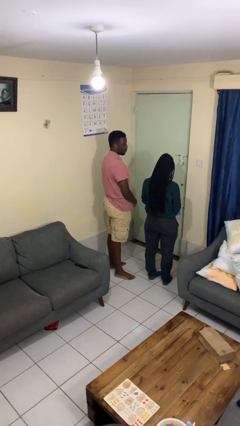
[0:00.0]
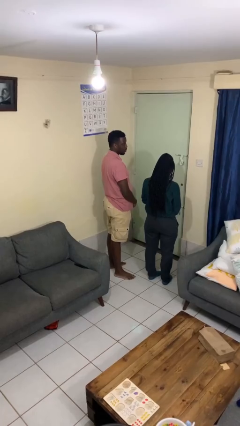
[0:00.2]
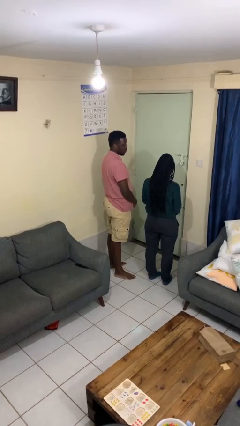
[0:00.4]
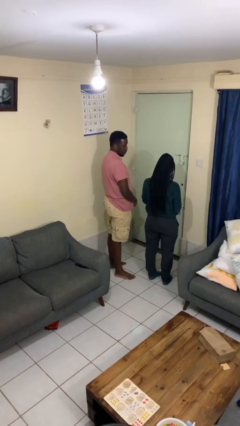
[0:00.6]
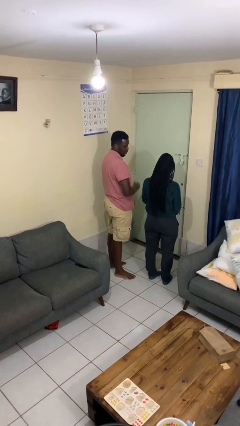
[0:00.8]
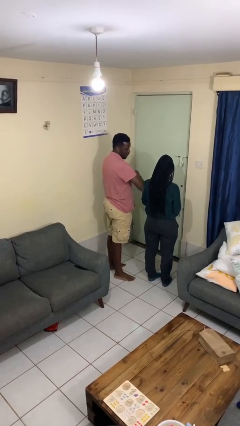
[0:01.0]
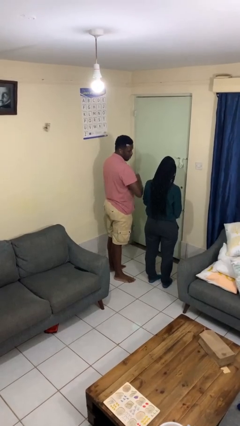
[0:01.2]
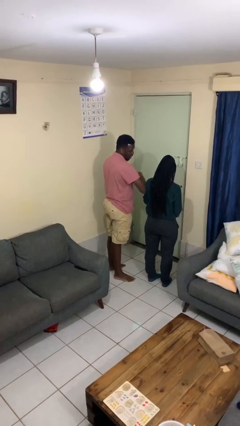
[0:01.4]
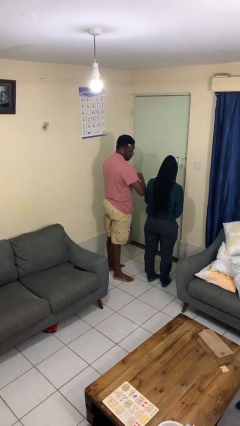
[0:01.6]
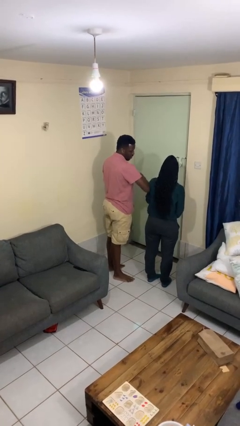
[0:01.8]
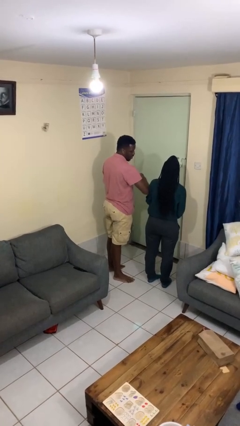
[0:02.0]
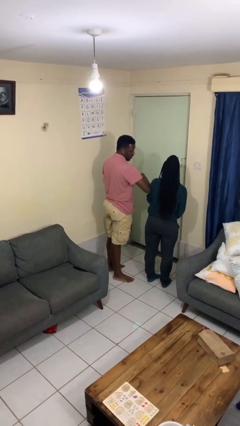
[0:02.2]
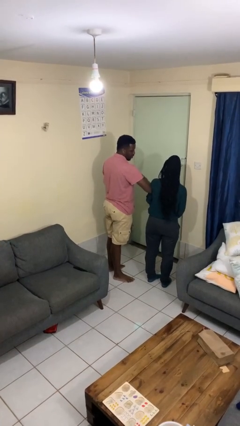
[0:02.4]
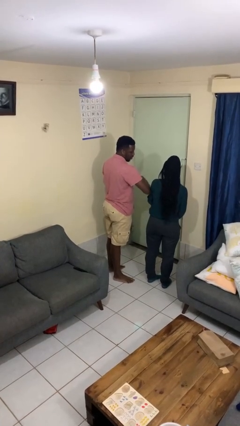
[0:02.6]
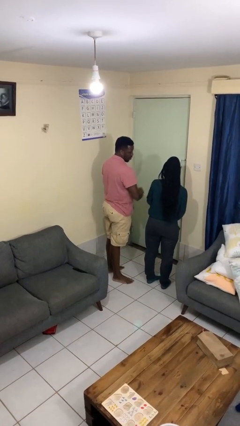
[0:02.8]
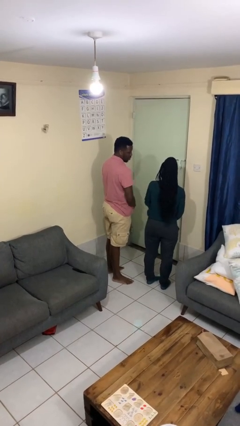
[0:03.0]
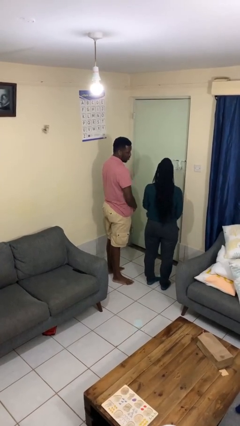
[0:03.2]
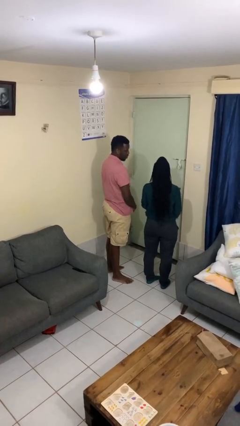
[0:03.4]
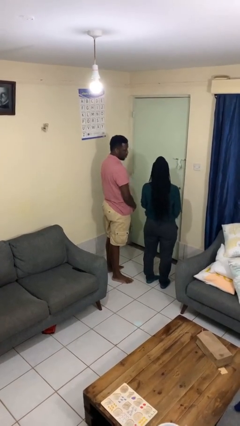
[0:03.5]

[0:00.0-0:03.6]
person nudges person with elbow

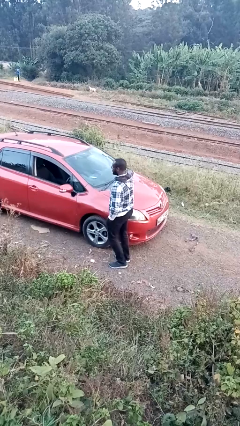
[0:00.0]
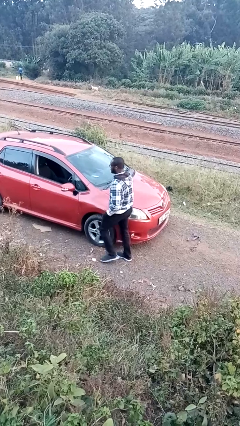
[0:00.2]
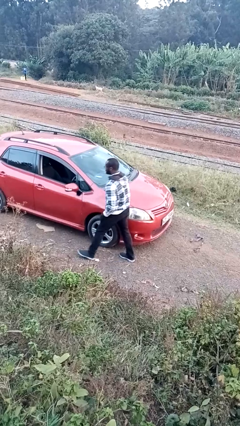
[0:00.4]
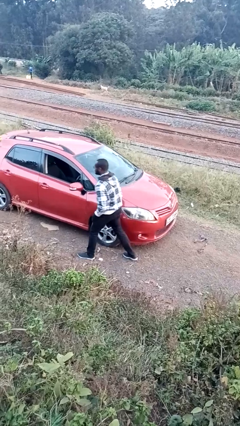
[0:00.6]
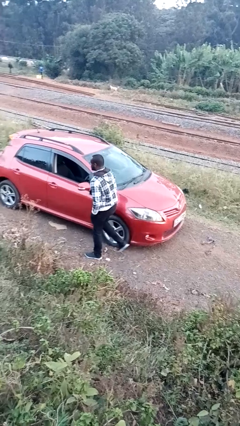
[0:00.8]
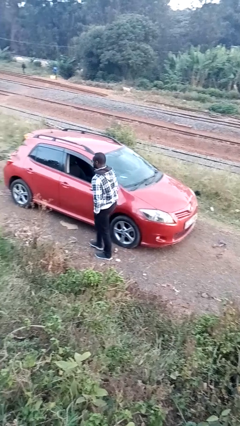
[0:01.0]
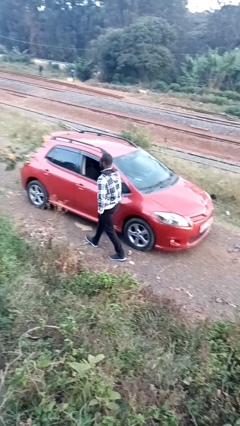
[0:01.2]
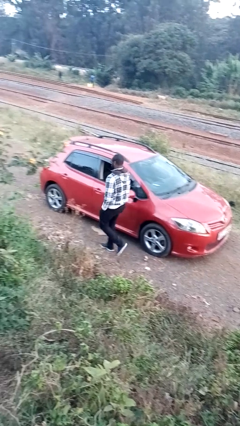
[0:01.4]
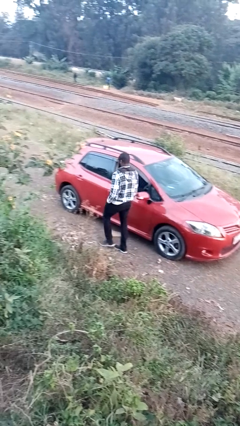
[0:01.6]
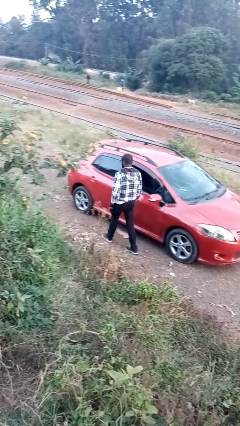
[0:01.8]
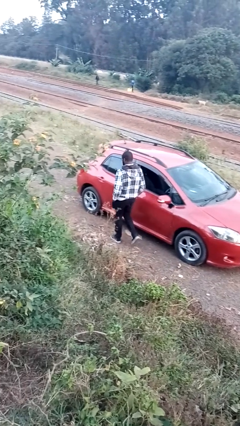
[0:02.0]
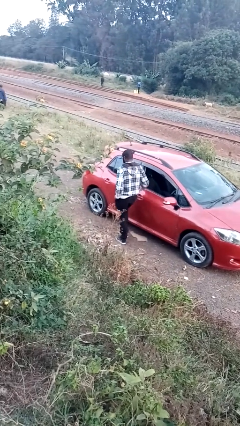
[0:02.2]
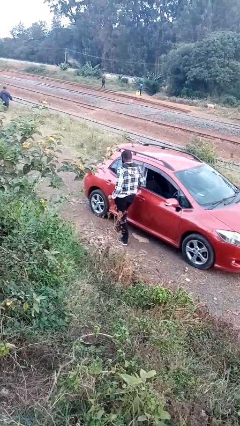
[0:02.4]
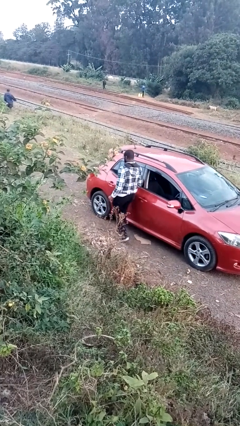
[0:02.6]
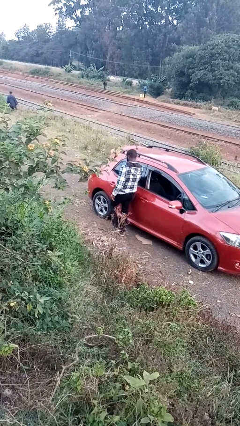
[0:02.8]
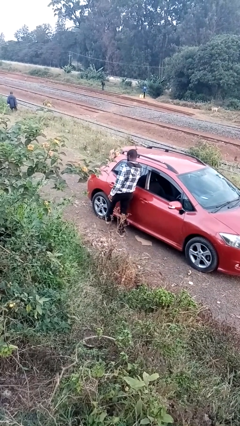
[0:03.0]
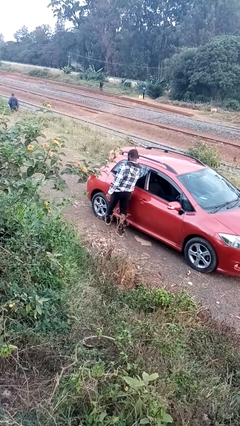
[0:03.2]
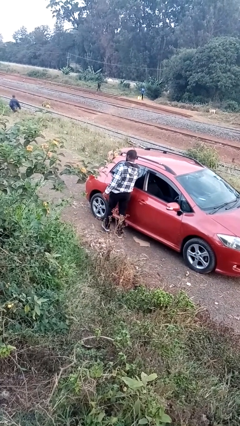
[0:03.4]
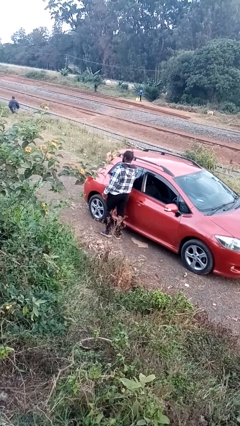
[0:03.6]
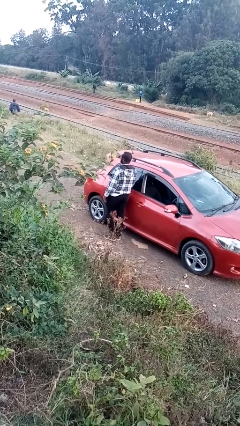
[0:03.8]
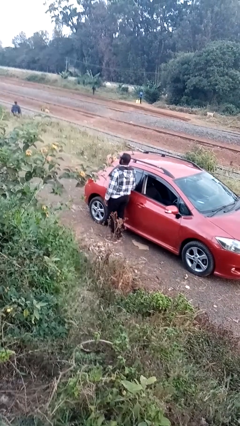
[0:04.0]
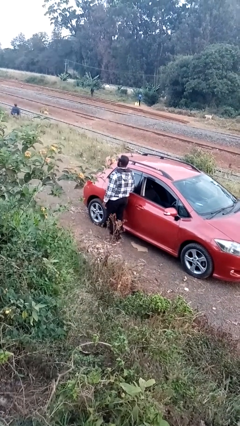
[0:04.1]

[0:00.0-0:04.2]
person kicks car tires

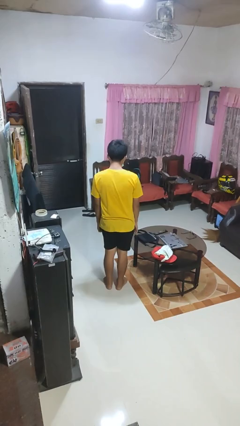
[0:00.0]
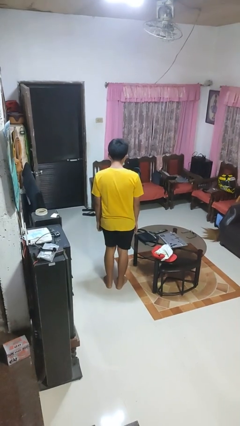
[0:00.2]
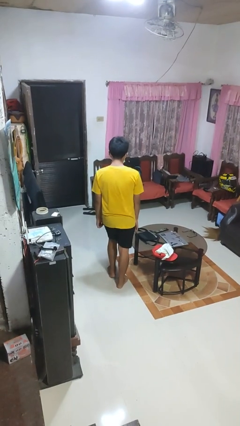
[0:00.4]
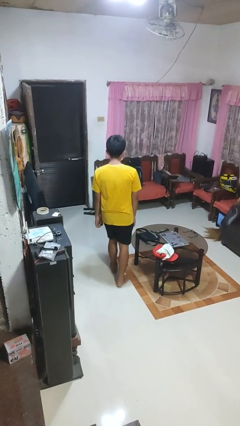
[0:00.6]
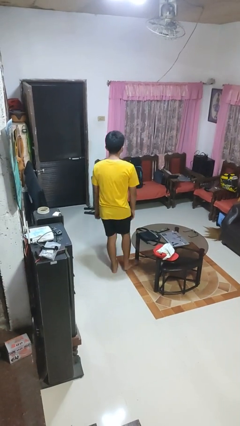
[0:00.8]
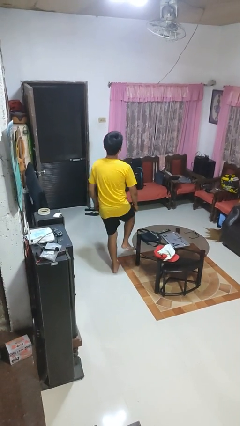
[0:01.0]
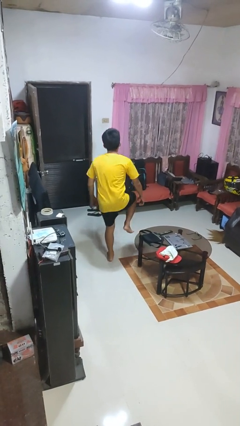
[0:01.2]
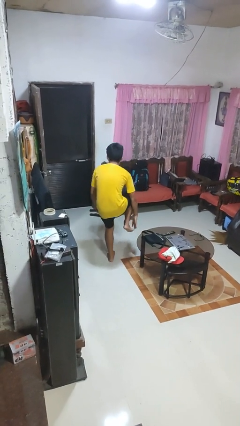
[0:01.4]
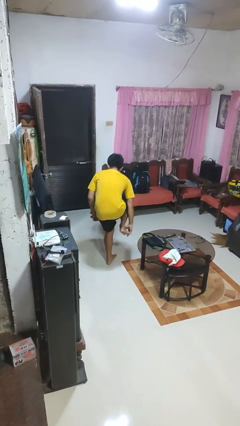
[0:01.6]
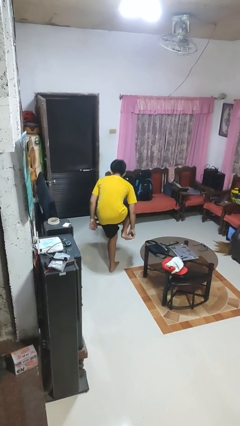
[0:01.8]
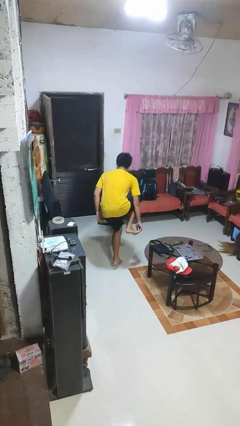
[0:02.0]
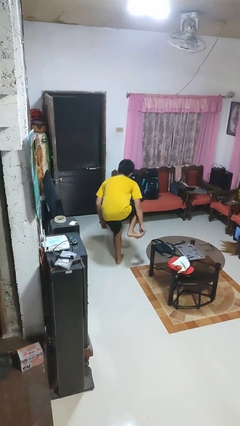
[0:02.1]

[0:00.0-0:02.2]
person trips on object on floor

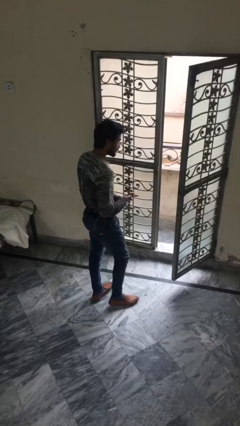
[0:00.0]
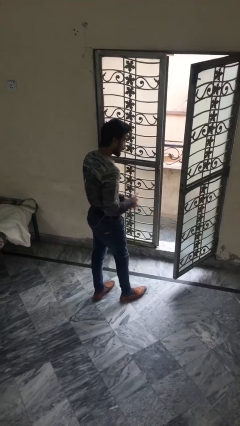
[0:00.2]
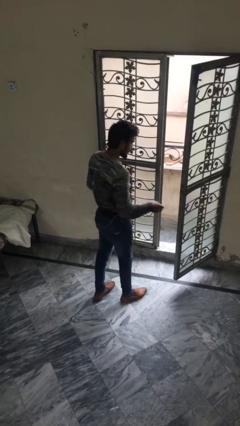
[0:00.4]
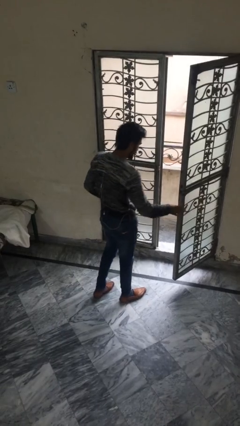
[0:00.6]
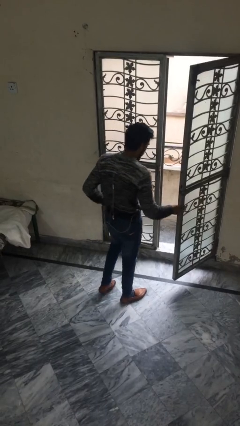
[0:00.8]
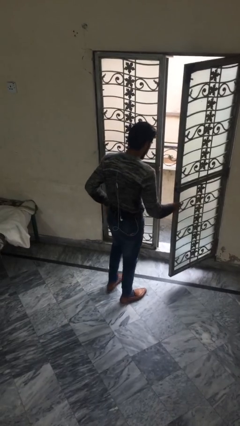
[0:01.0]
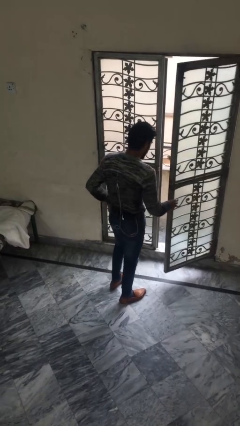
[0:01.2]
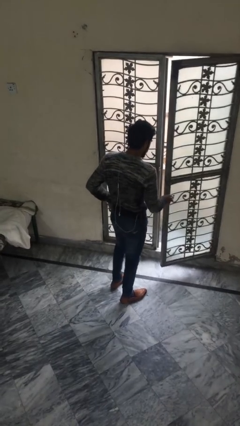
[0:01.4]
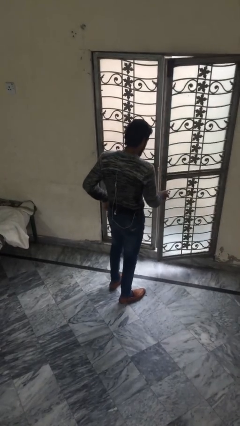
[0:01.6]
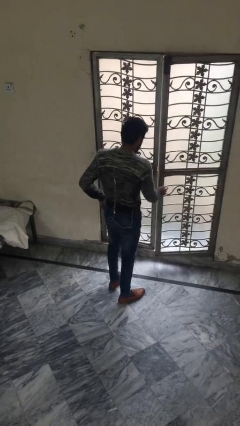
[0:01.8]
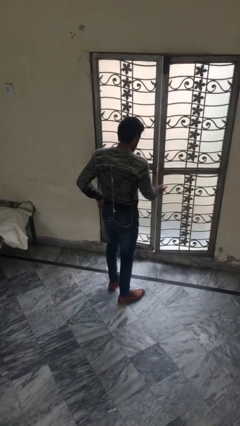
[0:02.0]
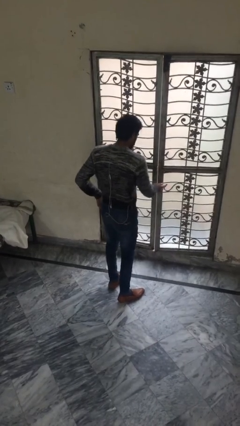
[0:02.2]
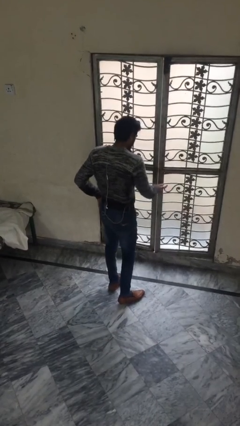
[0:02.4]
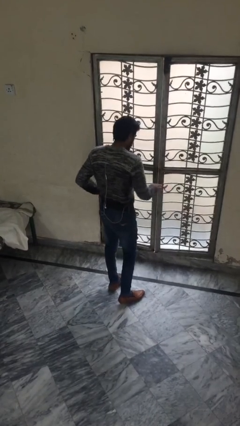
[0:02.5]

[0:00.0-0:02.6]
person closes facility door

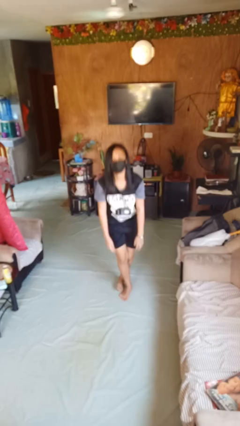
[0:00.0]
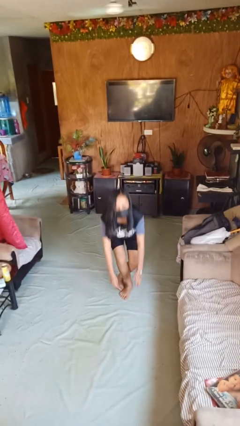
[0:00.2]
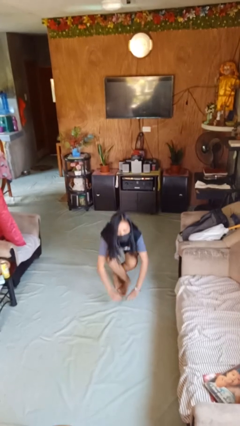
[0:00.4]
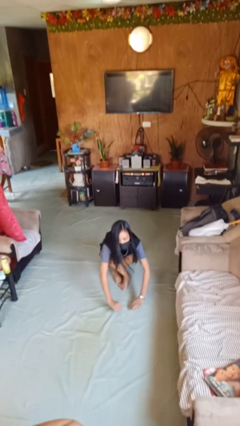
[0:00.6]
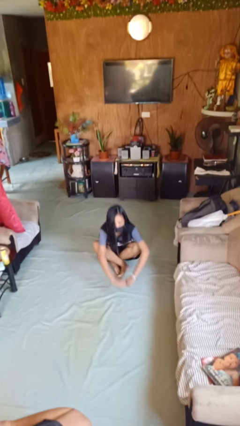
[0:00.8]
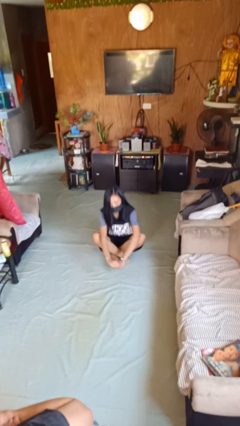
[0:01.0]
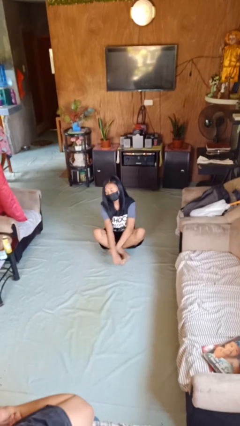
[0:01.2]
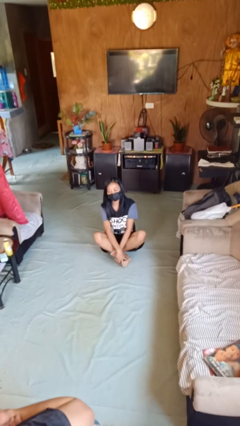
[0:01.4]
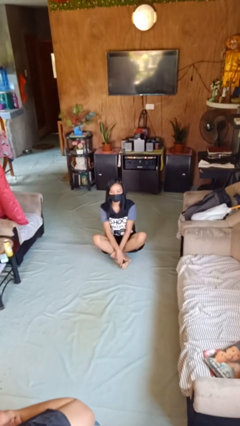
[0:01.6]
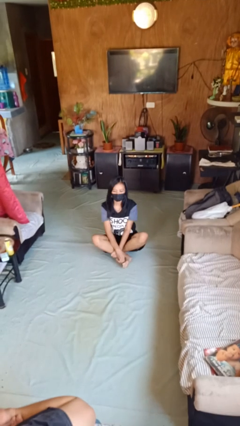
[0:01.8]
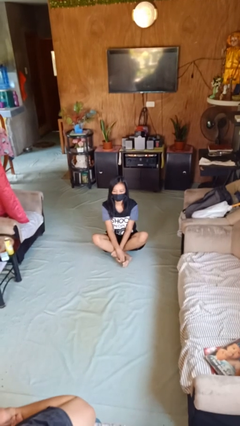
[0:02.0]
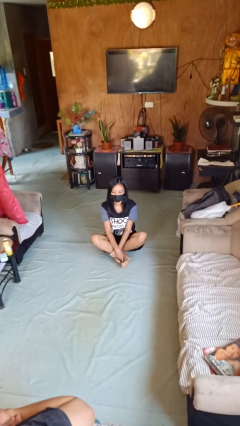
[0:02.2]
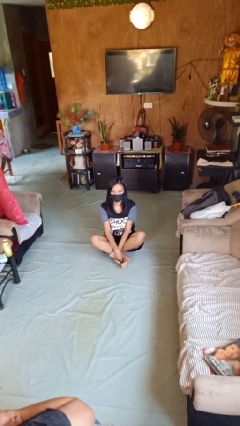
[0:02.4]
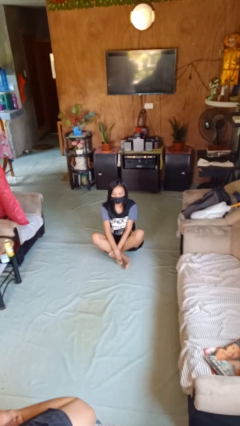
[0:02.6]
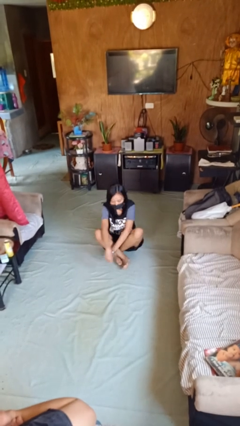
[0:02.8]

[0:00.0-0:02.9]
person sits crisscross

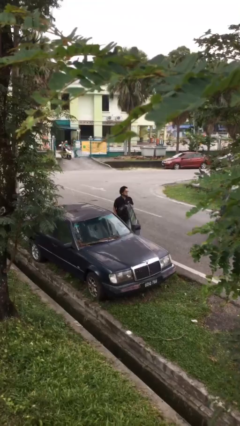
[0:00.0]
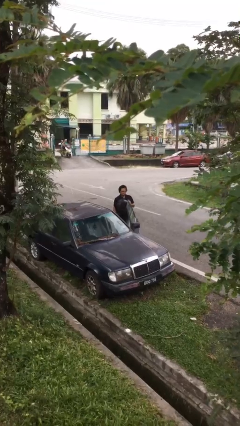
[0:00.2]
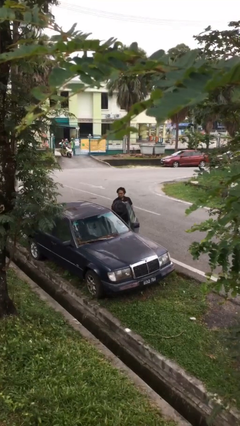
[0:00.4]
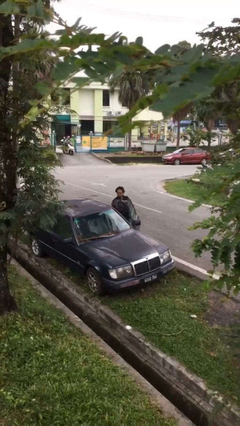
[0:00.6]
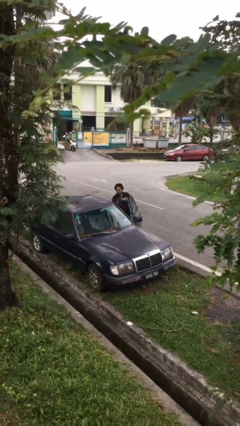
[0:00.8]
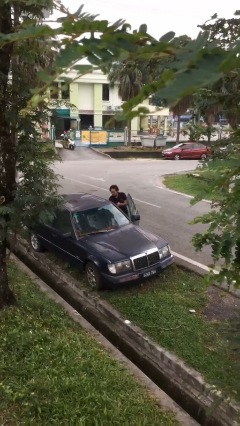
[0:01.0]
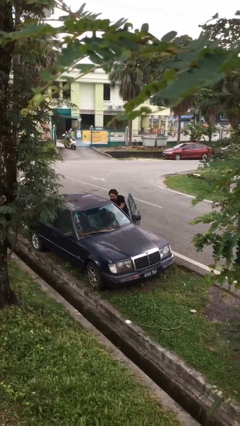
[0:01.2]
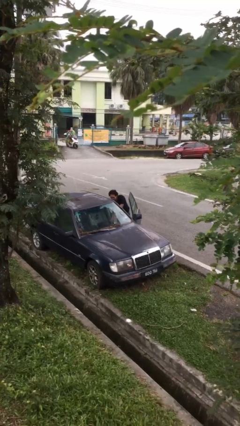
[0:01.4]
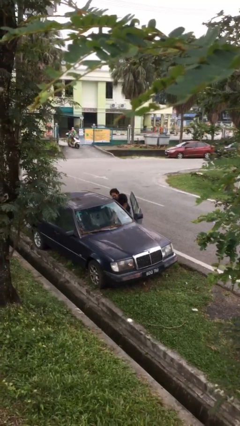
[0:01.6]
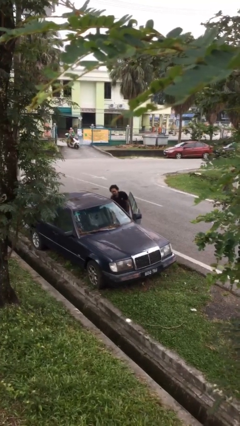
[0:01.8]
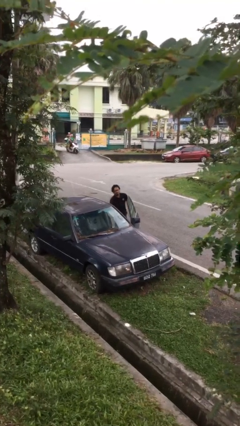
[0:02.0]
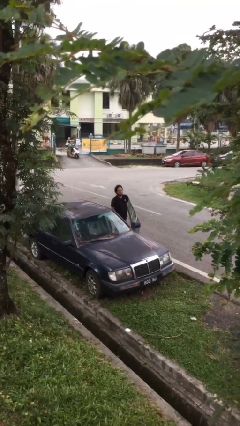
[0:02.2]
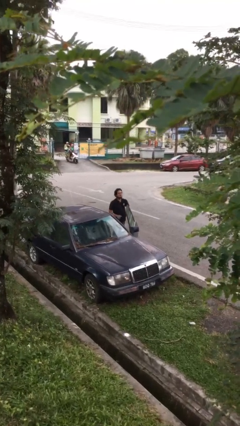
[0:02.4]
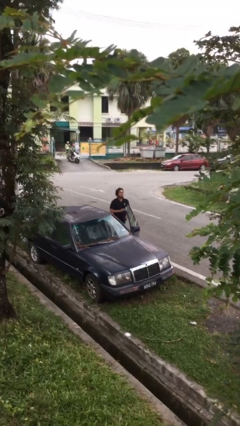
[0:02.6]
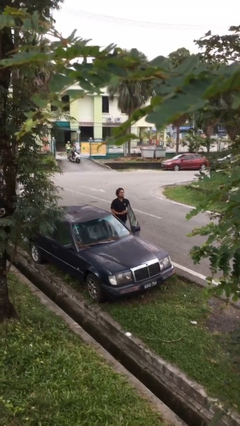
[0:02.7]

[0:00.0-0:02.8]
person loads car
